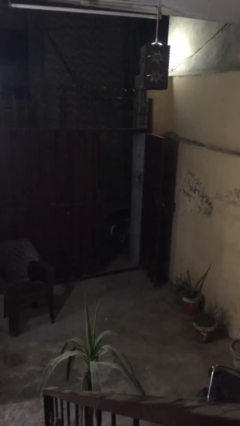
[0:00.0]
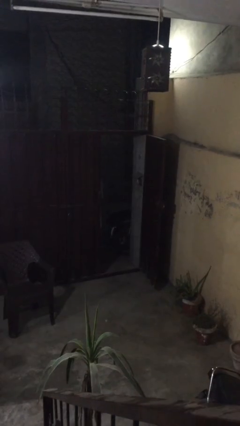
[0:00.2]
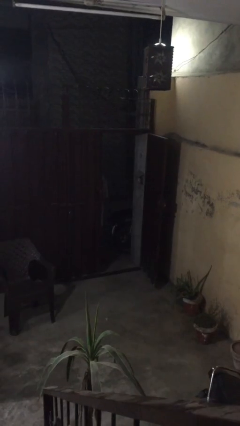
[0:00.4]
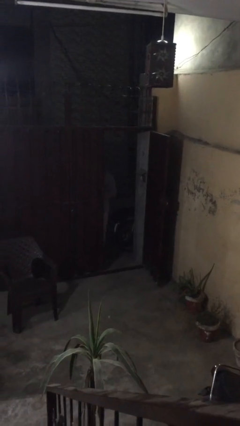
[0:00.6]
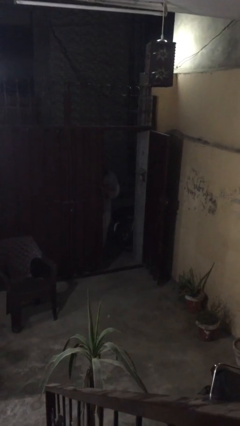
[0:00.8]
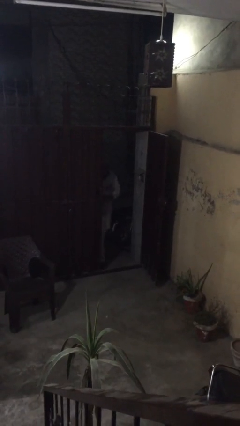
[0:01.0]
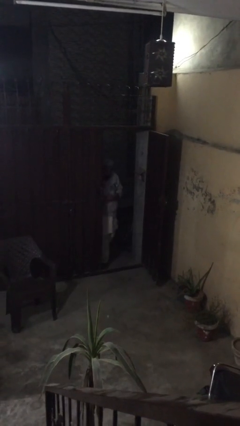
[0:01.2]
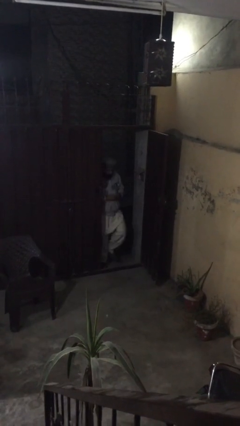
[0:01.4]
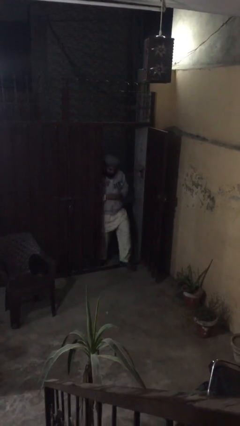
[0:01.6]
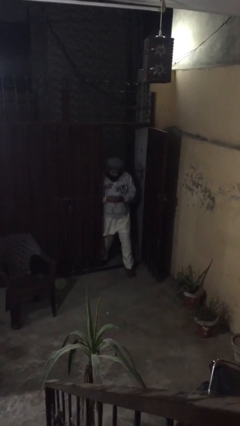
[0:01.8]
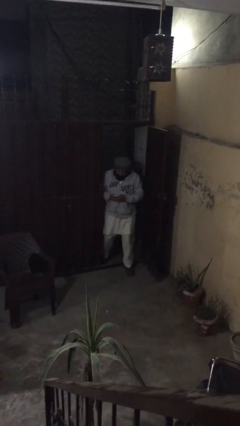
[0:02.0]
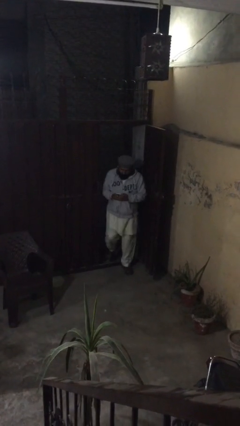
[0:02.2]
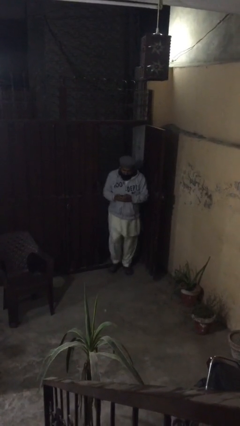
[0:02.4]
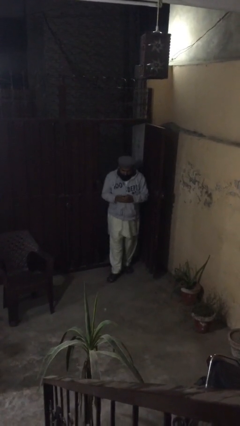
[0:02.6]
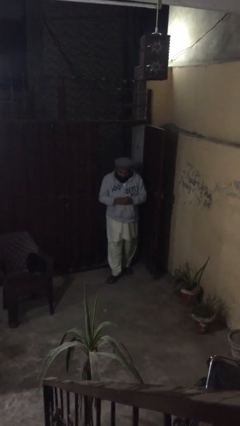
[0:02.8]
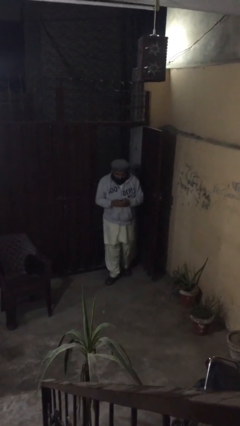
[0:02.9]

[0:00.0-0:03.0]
person enters scene through structure

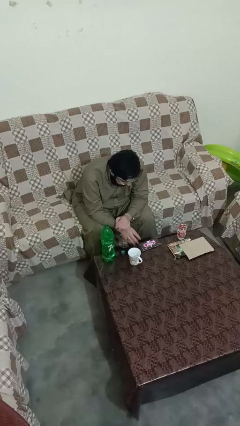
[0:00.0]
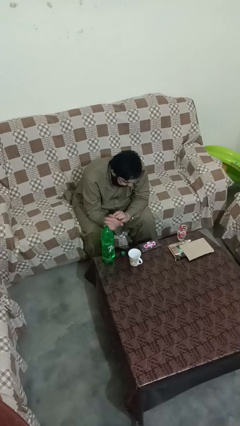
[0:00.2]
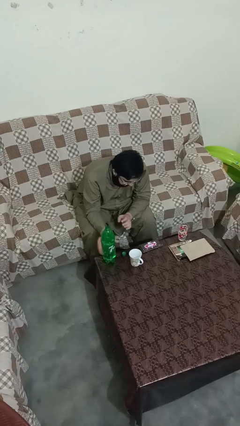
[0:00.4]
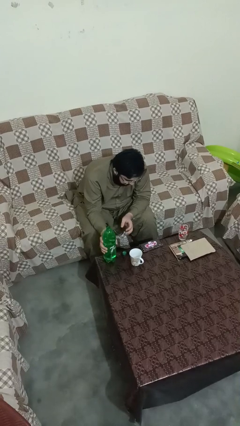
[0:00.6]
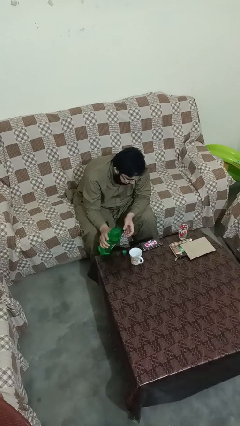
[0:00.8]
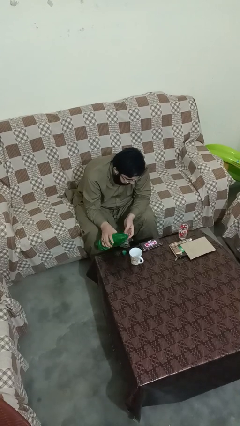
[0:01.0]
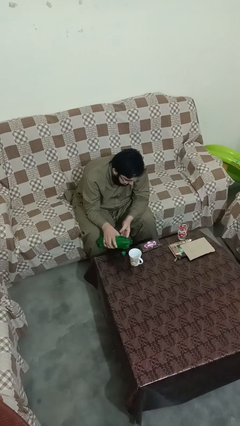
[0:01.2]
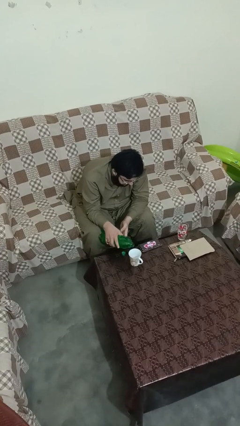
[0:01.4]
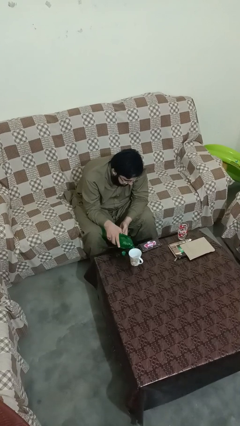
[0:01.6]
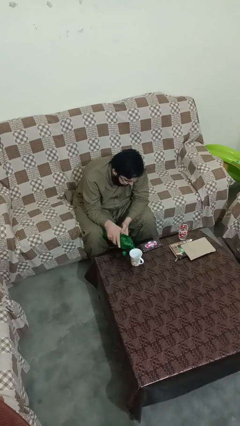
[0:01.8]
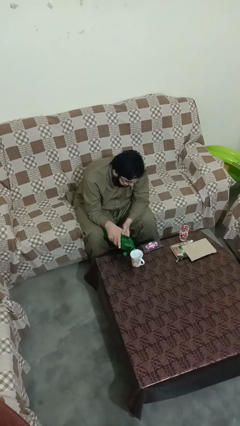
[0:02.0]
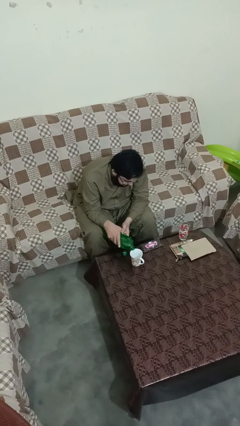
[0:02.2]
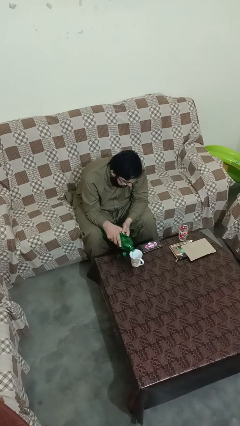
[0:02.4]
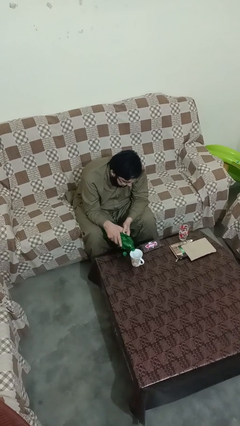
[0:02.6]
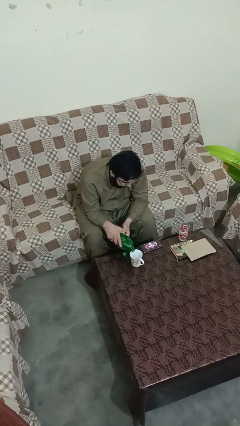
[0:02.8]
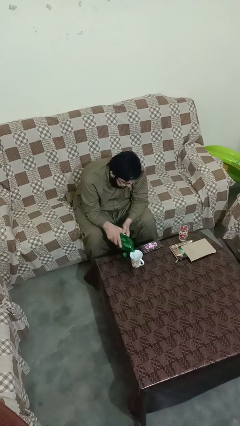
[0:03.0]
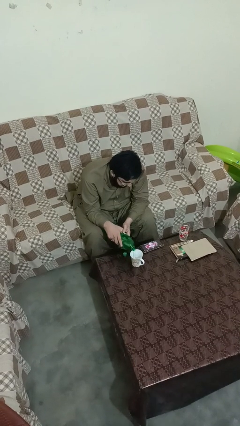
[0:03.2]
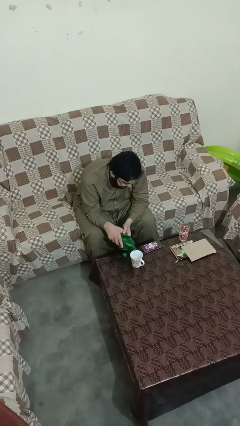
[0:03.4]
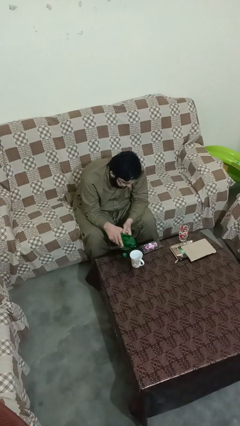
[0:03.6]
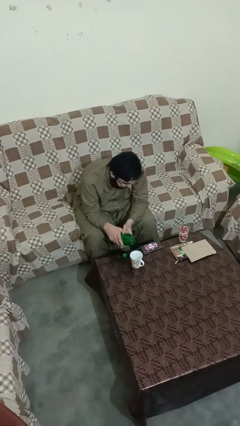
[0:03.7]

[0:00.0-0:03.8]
person pours liquid into cup

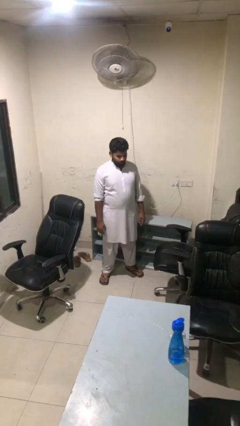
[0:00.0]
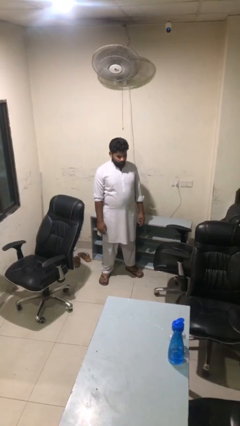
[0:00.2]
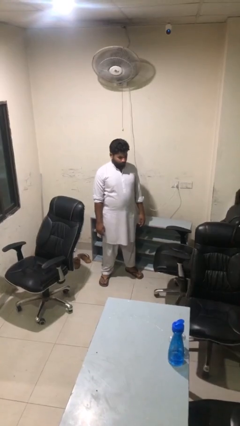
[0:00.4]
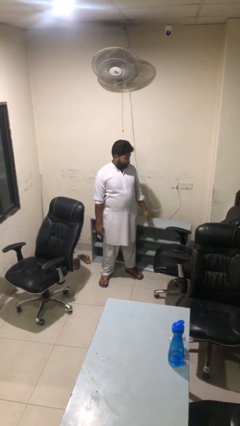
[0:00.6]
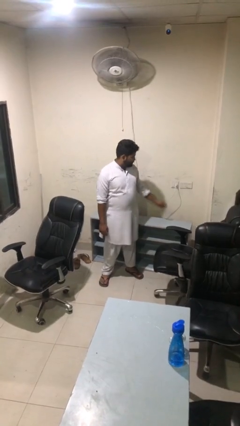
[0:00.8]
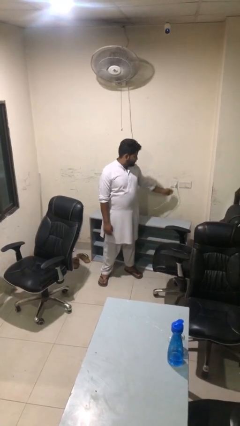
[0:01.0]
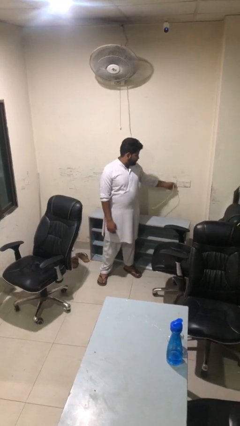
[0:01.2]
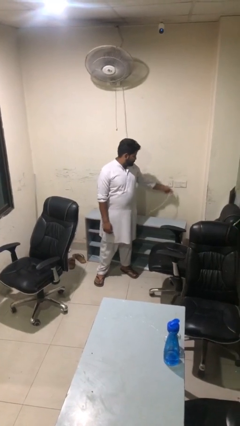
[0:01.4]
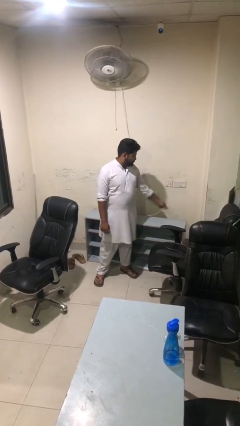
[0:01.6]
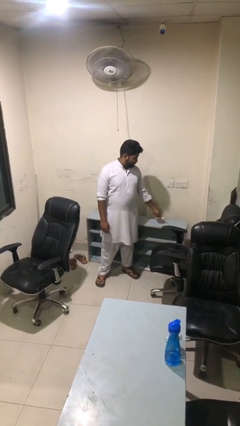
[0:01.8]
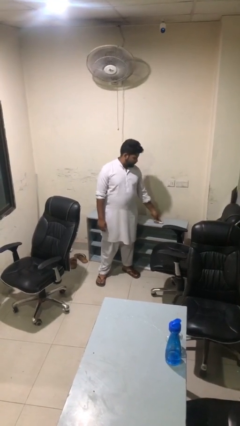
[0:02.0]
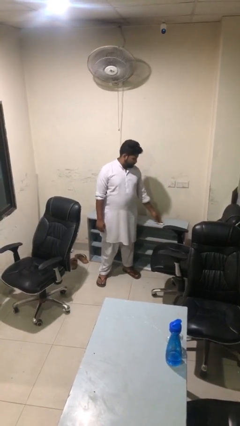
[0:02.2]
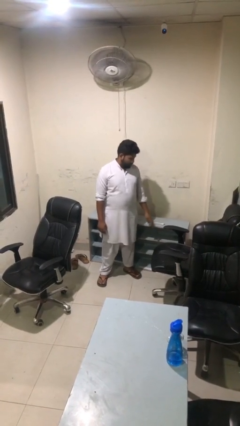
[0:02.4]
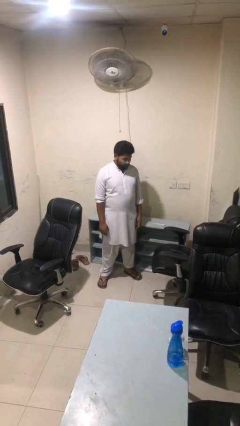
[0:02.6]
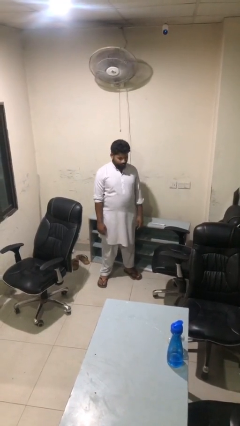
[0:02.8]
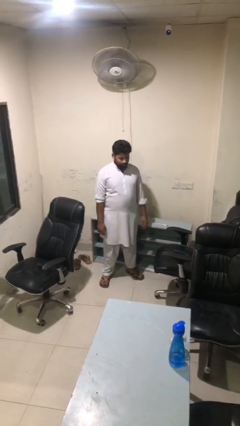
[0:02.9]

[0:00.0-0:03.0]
person unplugs from electrical socket

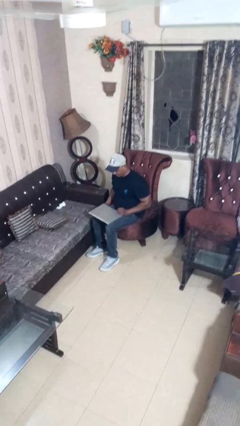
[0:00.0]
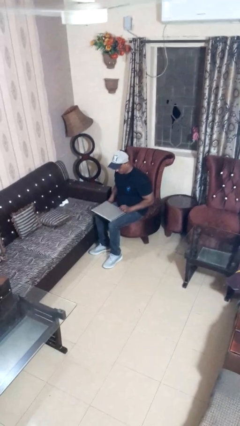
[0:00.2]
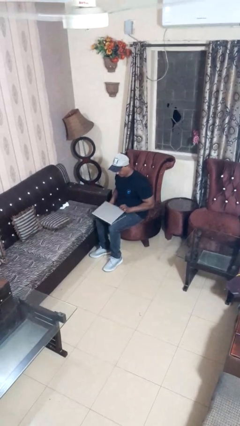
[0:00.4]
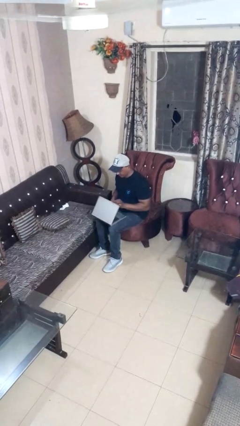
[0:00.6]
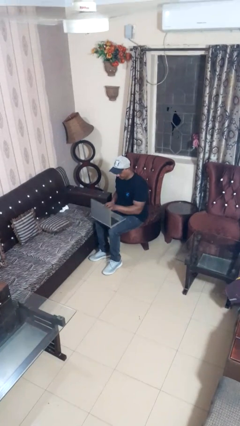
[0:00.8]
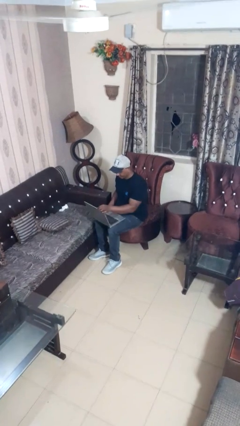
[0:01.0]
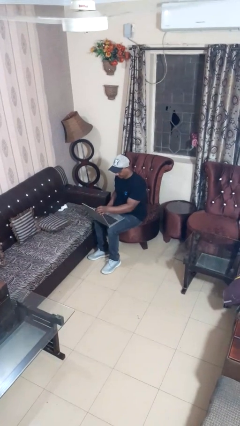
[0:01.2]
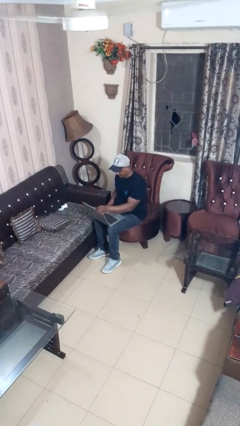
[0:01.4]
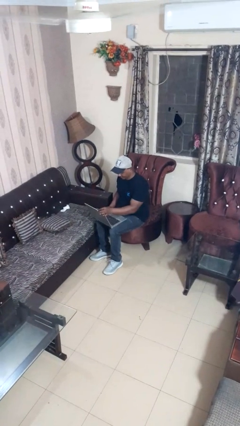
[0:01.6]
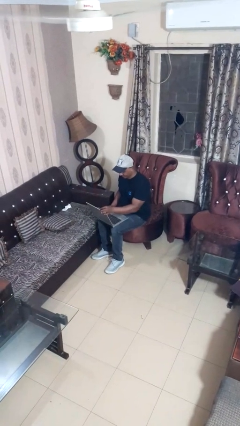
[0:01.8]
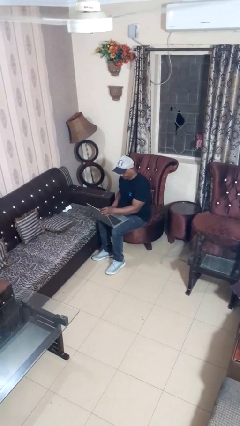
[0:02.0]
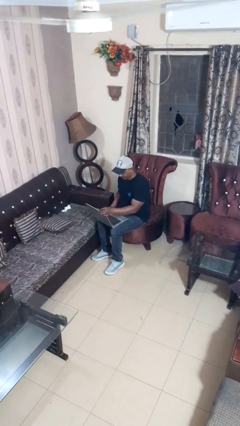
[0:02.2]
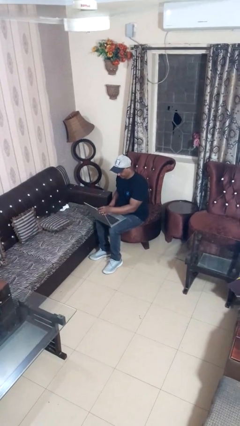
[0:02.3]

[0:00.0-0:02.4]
person opens laptop

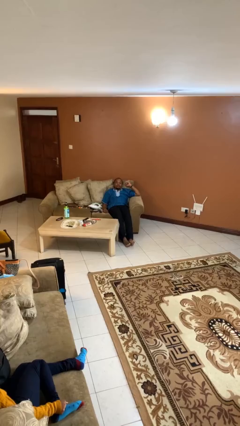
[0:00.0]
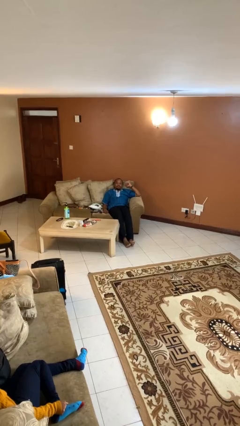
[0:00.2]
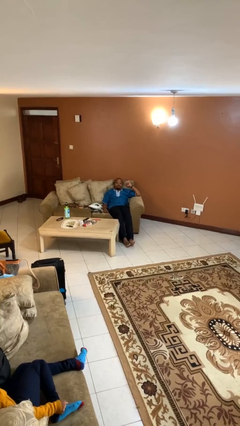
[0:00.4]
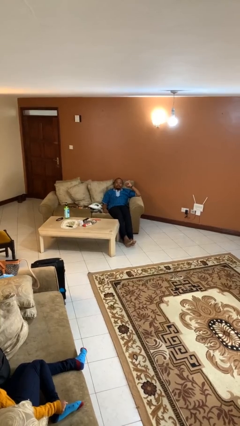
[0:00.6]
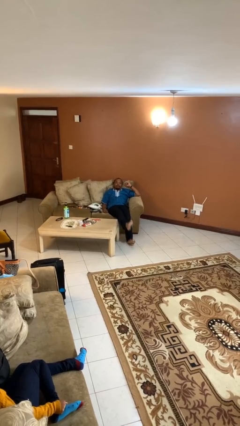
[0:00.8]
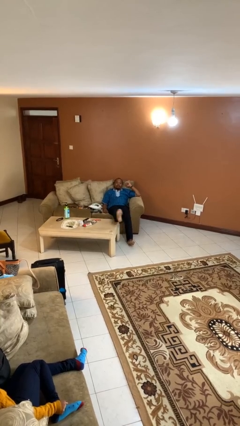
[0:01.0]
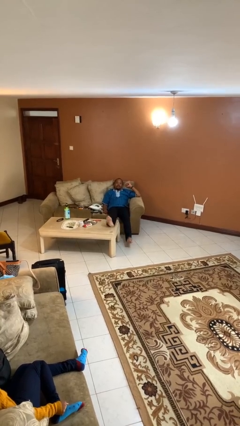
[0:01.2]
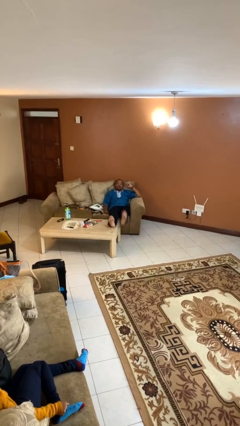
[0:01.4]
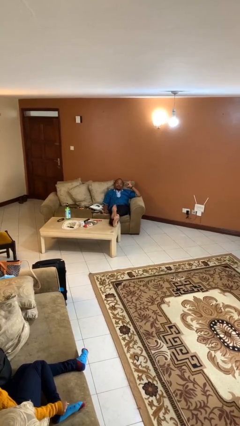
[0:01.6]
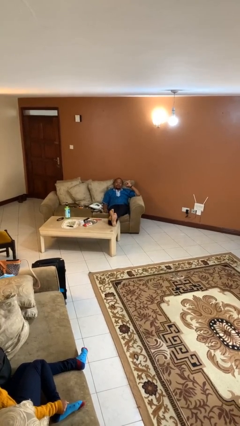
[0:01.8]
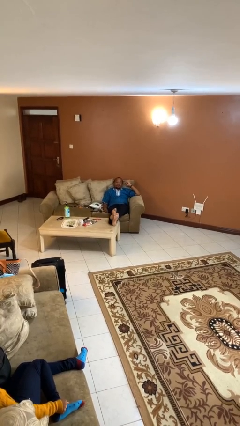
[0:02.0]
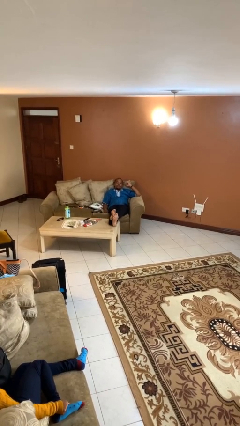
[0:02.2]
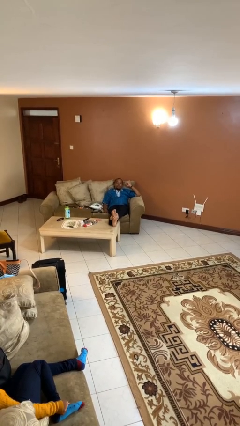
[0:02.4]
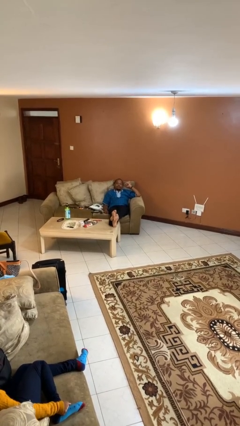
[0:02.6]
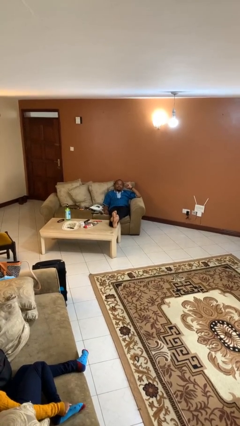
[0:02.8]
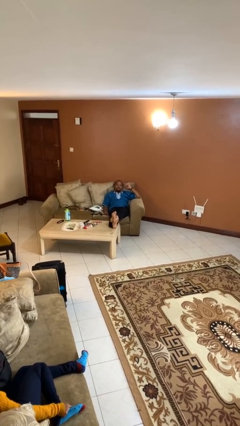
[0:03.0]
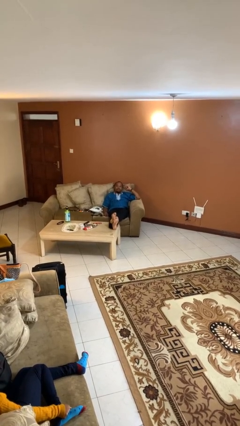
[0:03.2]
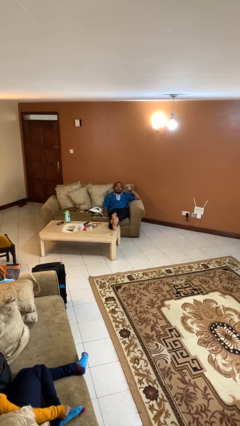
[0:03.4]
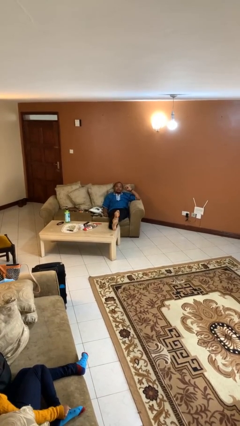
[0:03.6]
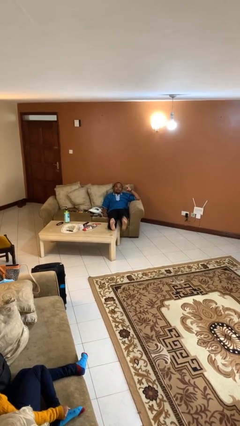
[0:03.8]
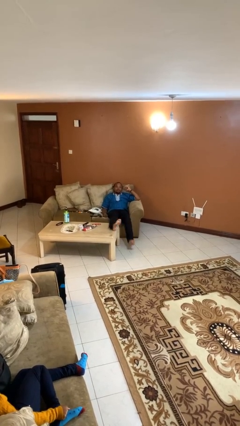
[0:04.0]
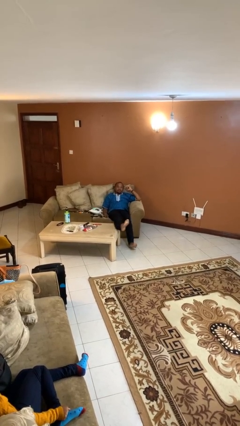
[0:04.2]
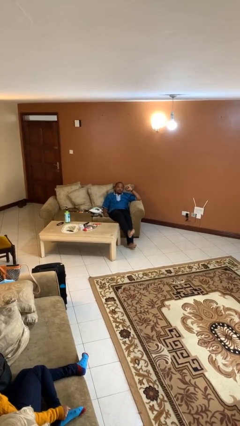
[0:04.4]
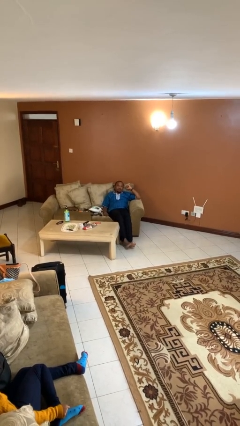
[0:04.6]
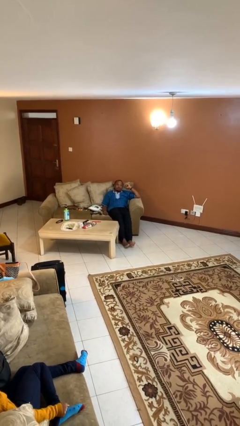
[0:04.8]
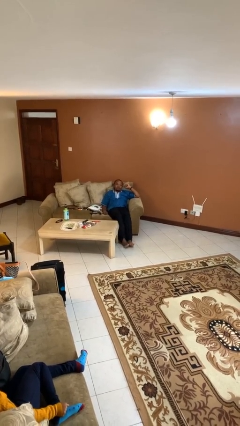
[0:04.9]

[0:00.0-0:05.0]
person puts feet up

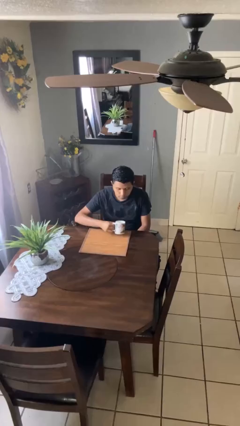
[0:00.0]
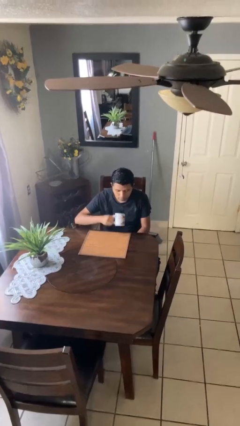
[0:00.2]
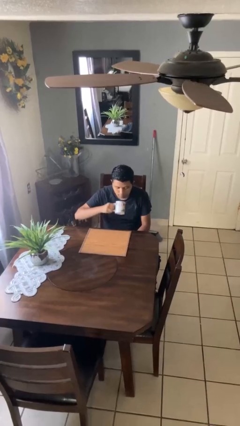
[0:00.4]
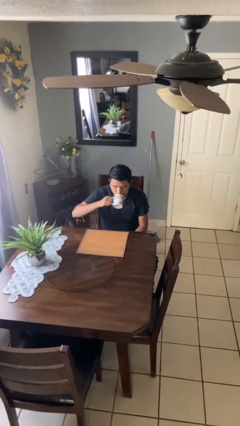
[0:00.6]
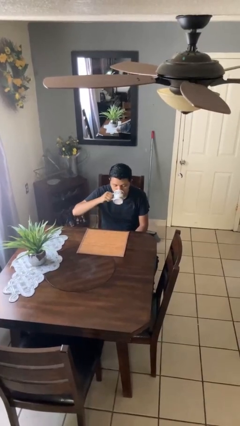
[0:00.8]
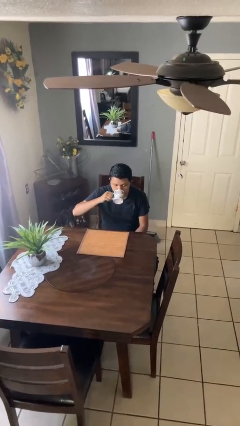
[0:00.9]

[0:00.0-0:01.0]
person picks up object from table
